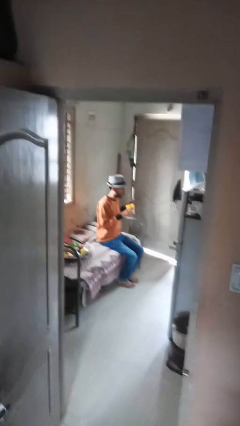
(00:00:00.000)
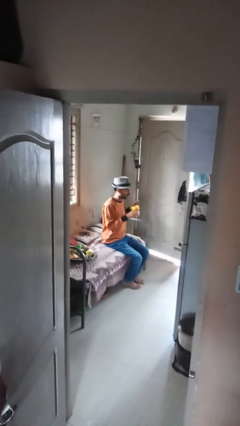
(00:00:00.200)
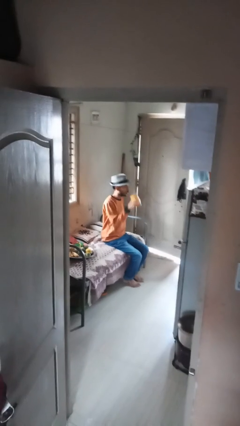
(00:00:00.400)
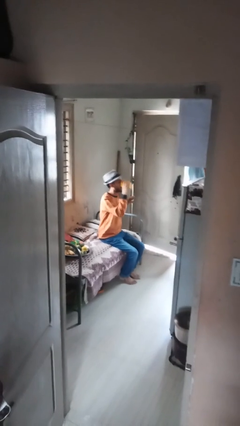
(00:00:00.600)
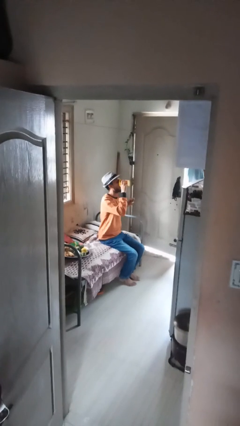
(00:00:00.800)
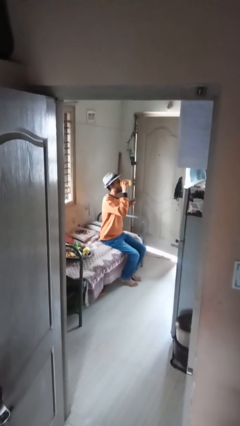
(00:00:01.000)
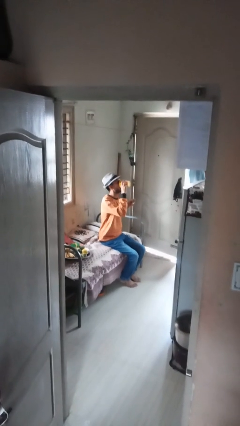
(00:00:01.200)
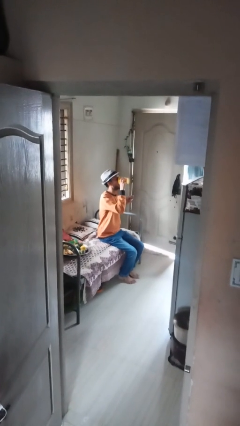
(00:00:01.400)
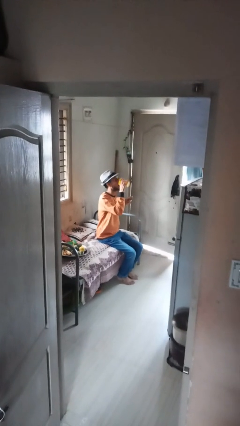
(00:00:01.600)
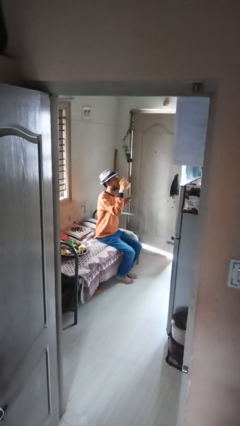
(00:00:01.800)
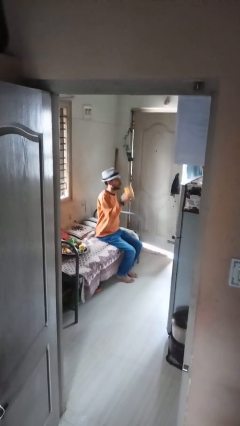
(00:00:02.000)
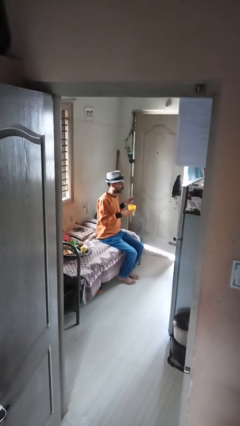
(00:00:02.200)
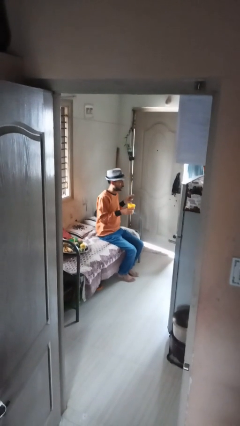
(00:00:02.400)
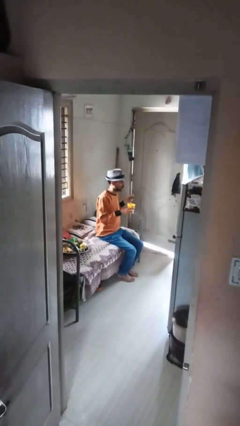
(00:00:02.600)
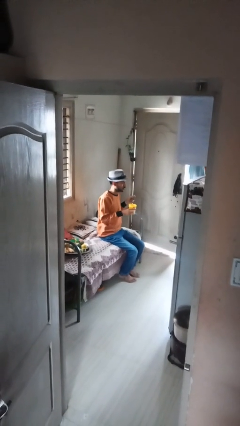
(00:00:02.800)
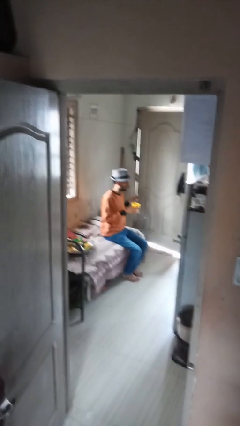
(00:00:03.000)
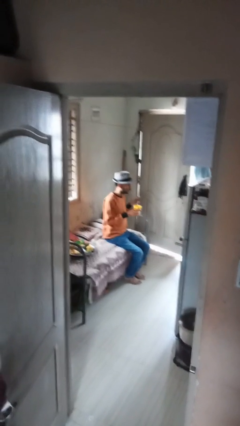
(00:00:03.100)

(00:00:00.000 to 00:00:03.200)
person drinks from mug

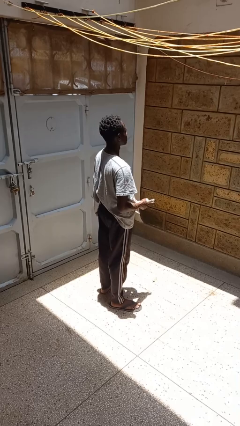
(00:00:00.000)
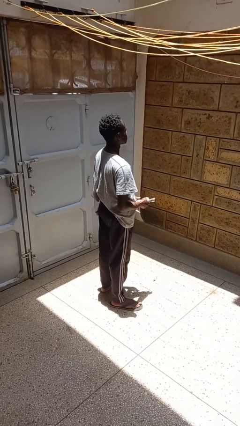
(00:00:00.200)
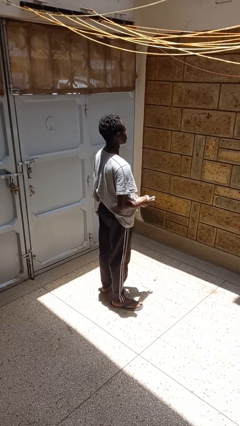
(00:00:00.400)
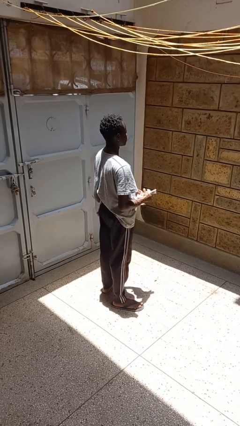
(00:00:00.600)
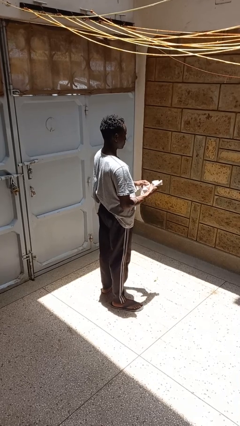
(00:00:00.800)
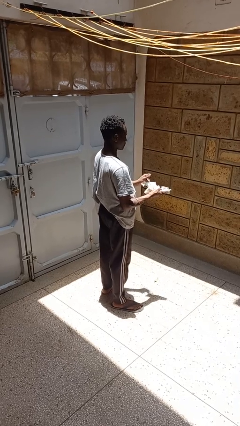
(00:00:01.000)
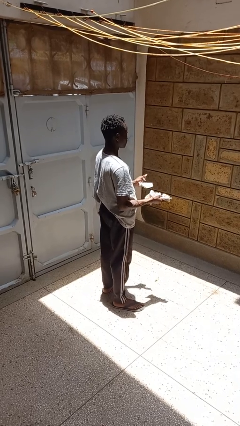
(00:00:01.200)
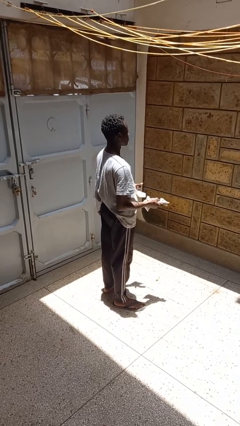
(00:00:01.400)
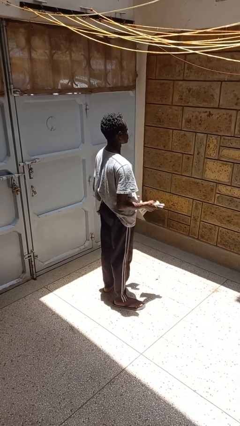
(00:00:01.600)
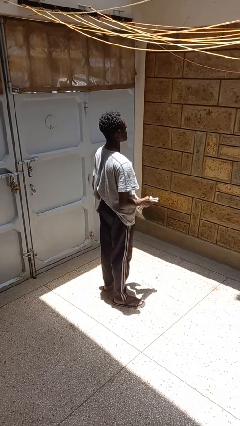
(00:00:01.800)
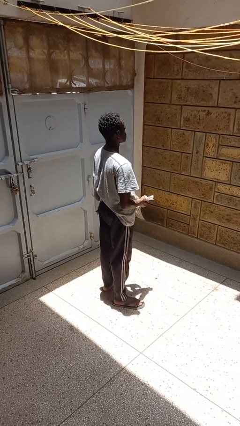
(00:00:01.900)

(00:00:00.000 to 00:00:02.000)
person tears paper

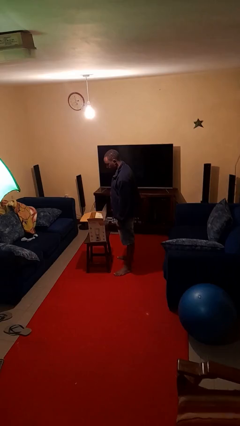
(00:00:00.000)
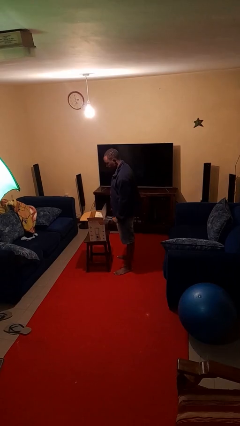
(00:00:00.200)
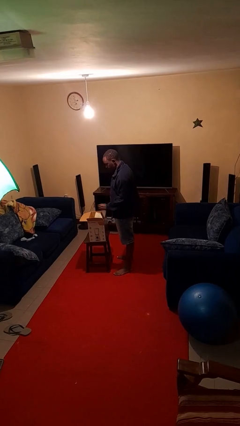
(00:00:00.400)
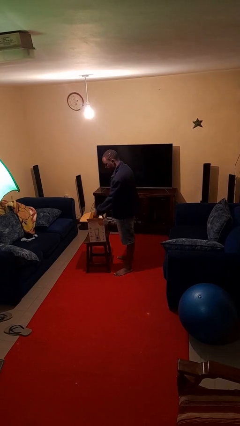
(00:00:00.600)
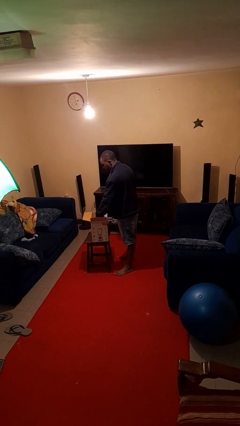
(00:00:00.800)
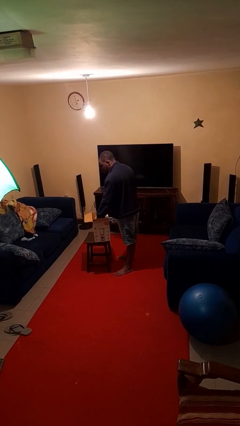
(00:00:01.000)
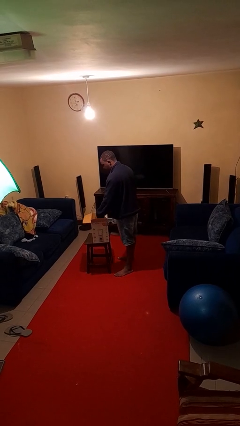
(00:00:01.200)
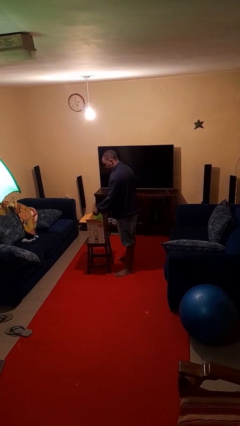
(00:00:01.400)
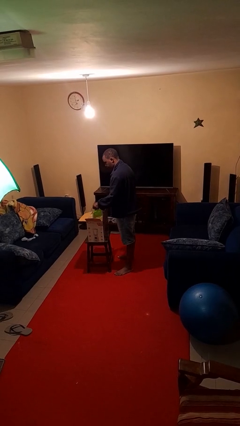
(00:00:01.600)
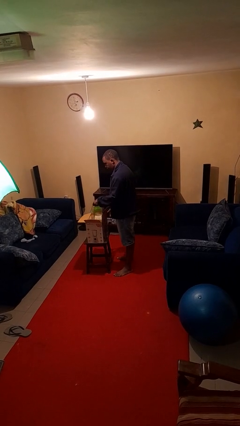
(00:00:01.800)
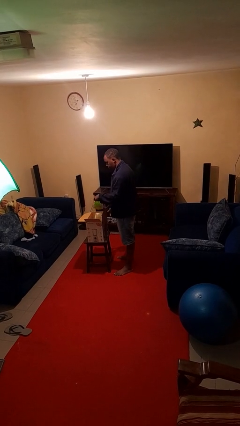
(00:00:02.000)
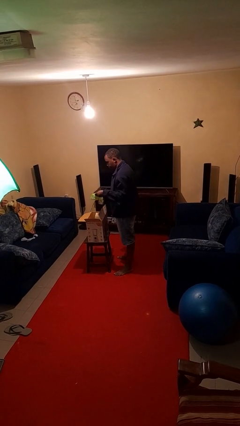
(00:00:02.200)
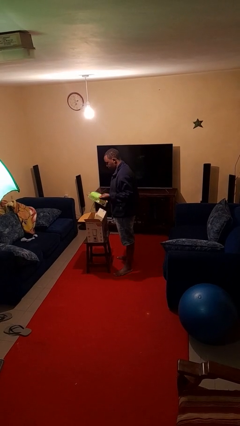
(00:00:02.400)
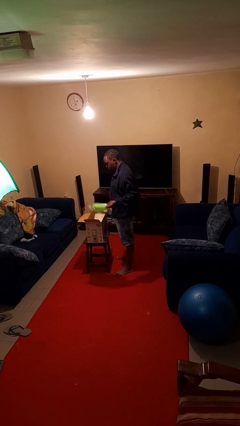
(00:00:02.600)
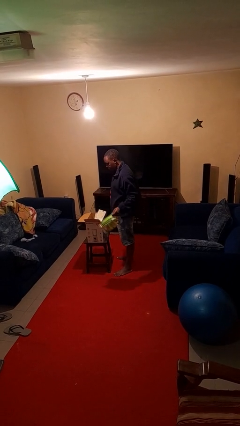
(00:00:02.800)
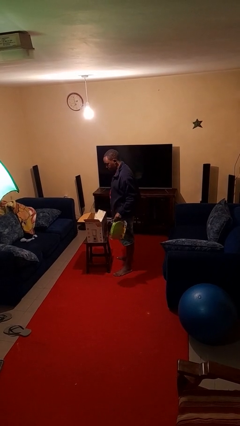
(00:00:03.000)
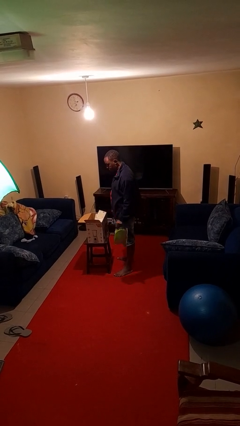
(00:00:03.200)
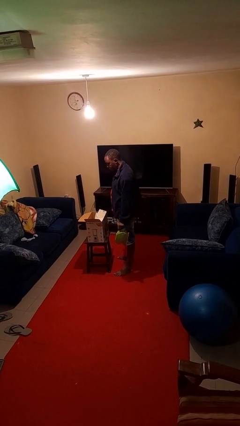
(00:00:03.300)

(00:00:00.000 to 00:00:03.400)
person takes object from box

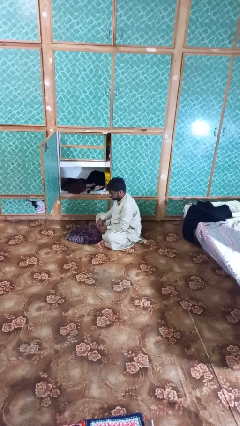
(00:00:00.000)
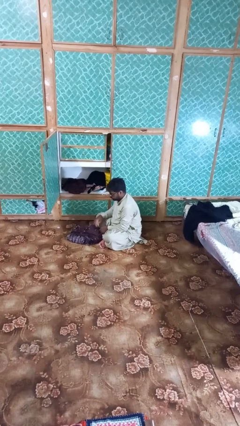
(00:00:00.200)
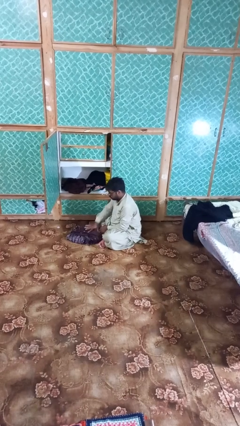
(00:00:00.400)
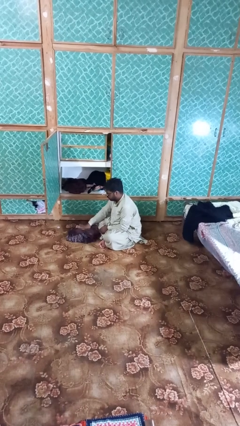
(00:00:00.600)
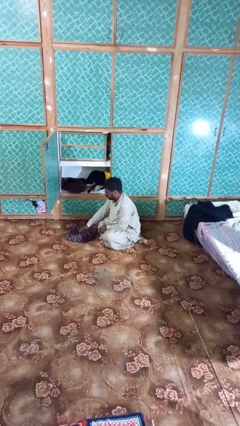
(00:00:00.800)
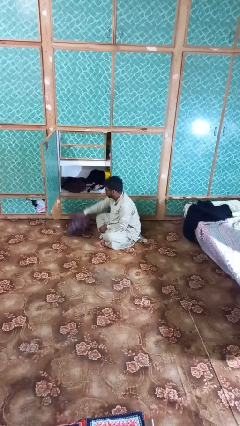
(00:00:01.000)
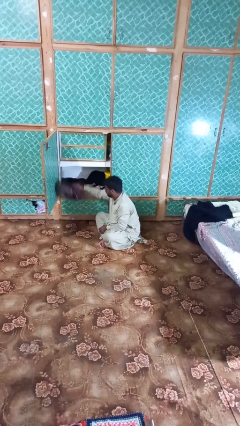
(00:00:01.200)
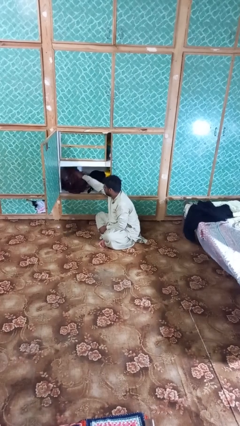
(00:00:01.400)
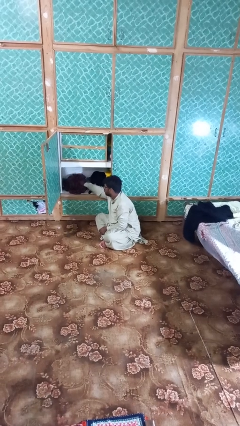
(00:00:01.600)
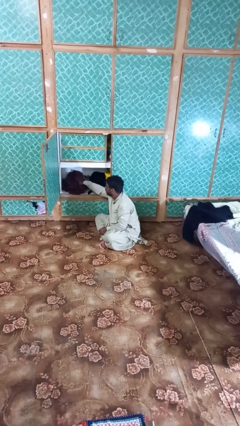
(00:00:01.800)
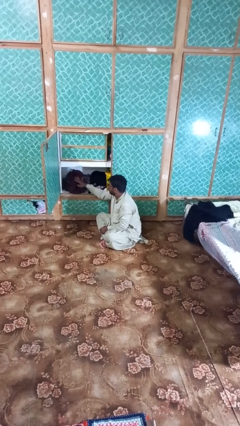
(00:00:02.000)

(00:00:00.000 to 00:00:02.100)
person puts clothes into dresser

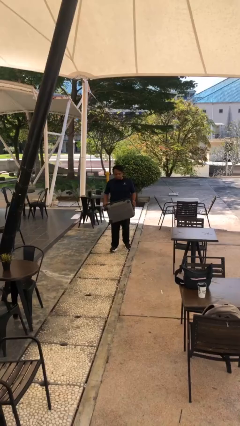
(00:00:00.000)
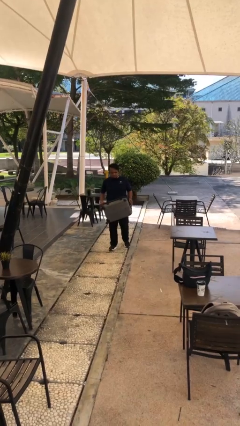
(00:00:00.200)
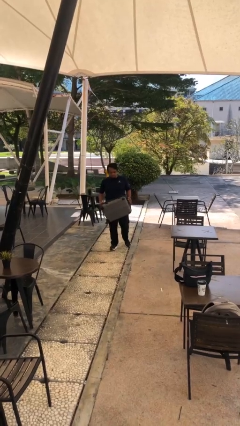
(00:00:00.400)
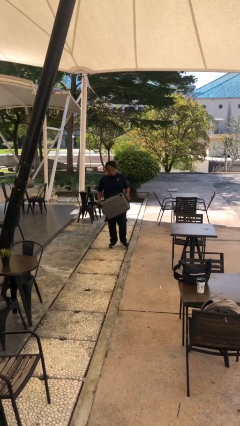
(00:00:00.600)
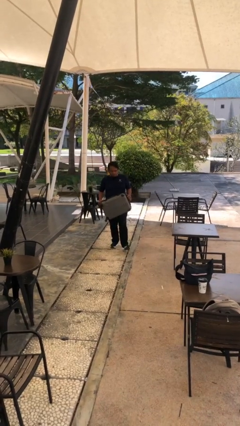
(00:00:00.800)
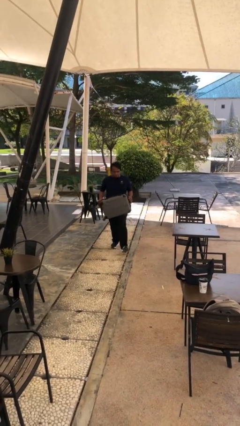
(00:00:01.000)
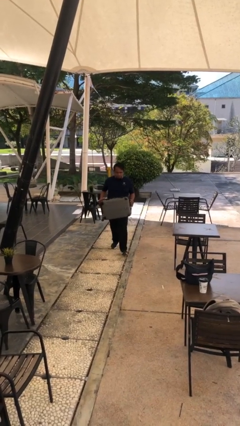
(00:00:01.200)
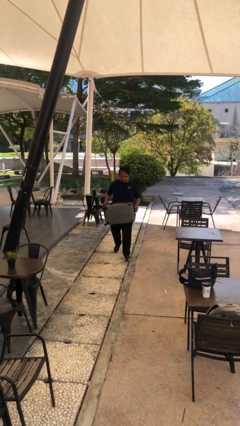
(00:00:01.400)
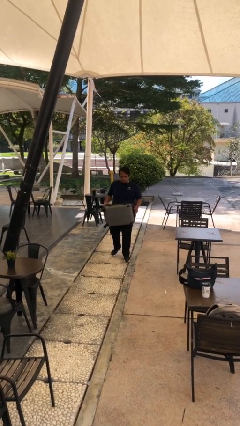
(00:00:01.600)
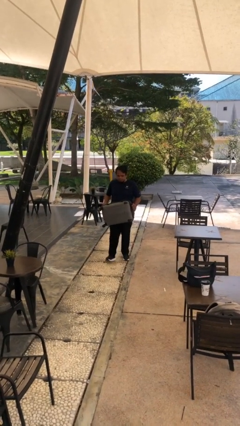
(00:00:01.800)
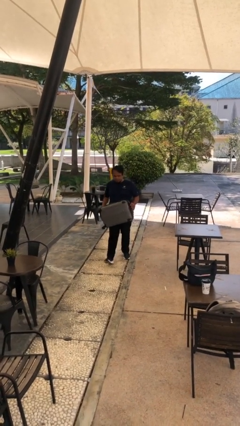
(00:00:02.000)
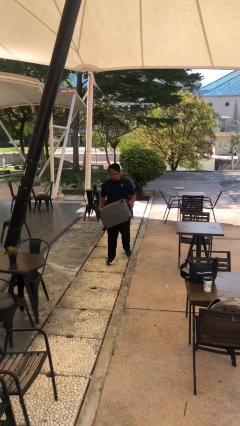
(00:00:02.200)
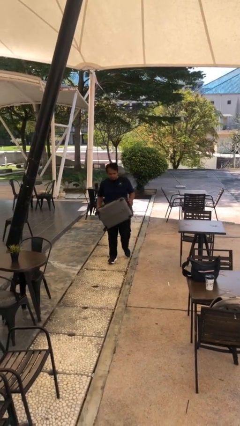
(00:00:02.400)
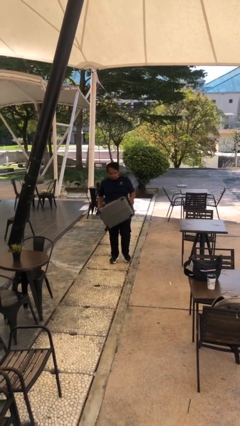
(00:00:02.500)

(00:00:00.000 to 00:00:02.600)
person carries heavy object

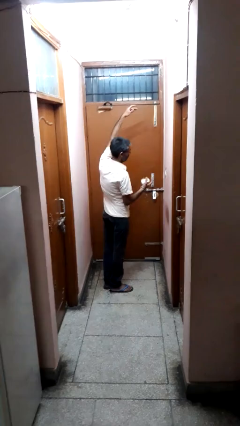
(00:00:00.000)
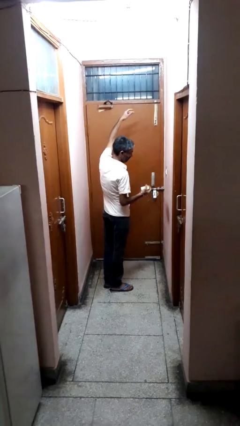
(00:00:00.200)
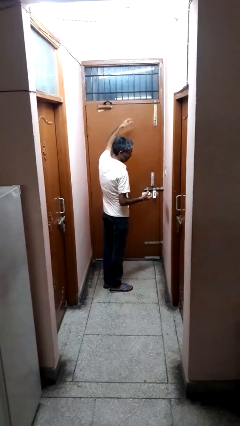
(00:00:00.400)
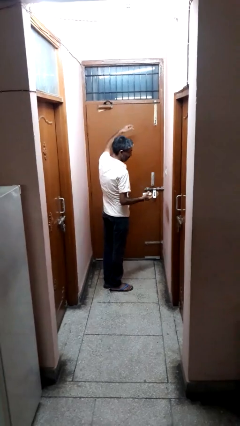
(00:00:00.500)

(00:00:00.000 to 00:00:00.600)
person catches dropped object

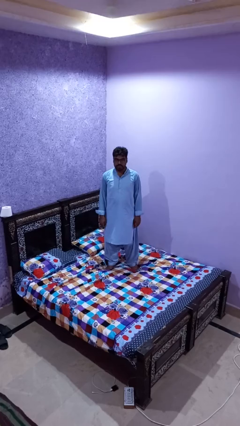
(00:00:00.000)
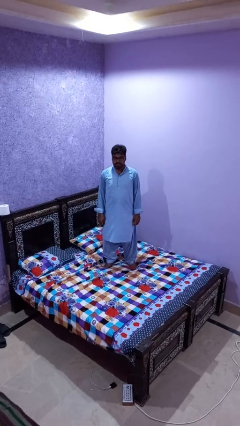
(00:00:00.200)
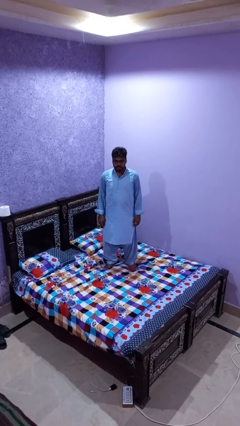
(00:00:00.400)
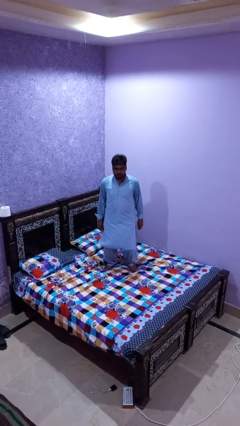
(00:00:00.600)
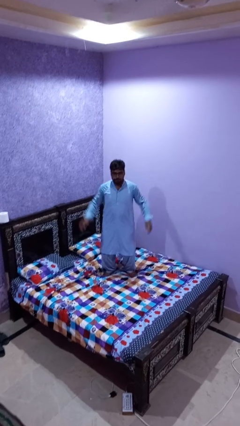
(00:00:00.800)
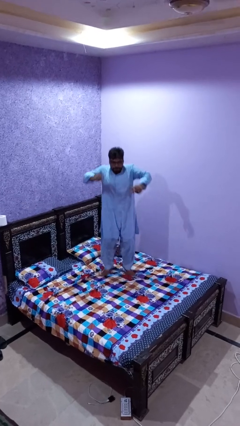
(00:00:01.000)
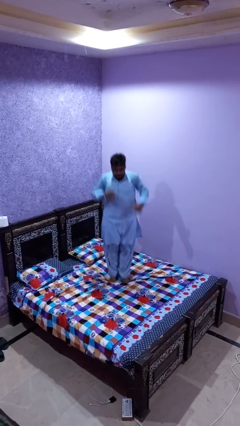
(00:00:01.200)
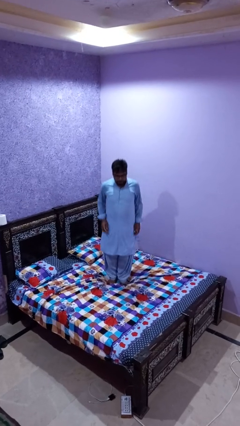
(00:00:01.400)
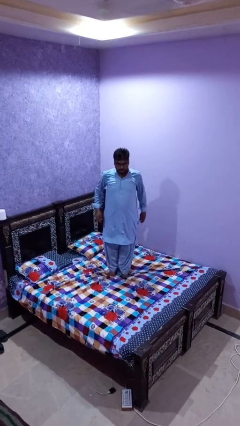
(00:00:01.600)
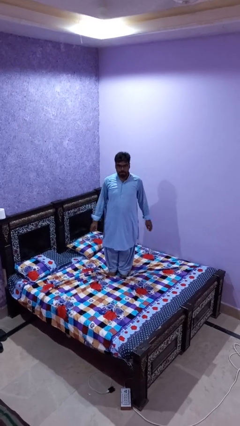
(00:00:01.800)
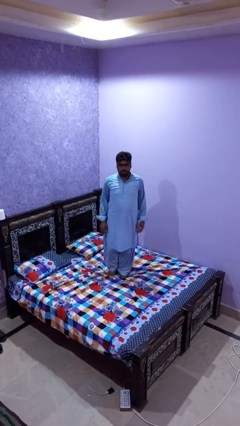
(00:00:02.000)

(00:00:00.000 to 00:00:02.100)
person jumps on bed

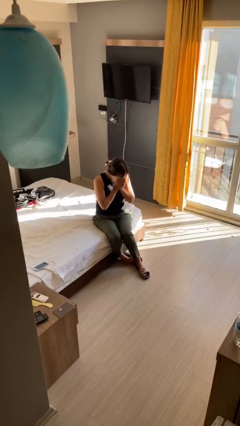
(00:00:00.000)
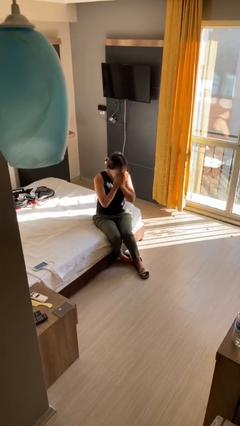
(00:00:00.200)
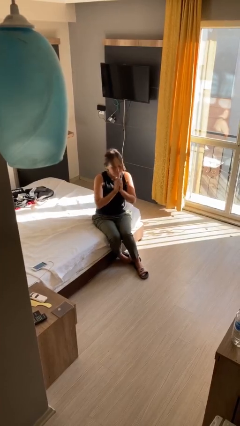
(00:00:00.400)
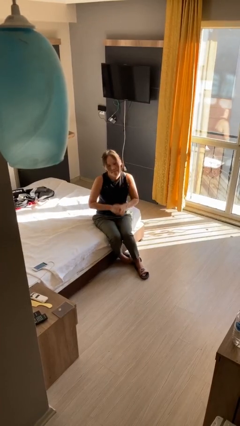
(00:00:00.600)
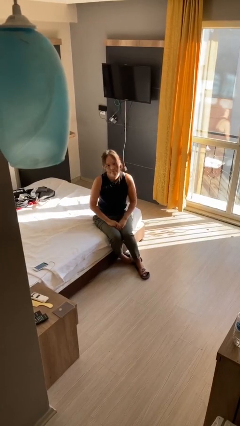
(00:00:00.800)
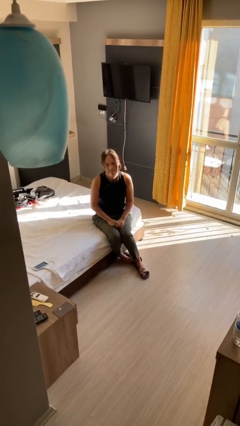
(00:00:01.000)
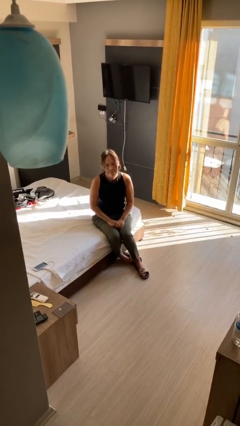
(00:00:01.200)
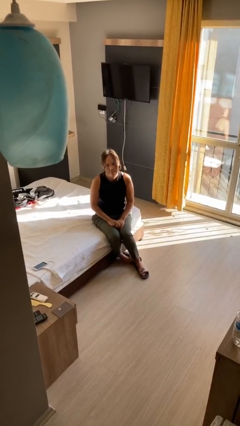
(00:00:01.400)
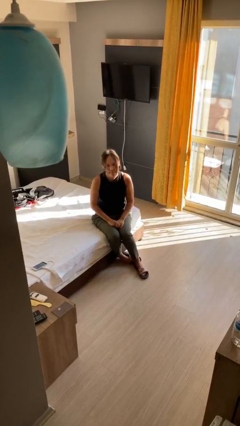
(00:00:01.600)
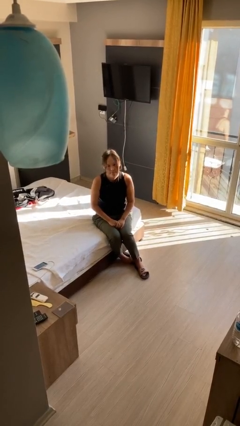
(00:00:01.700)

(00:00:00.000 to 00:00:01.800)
person sneezes into hand
